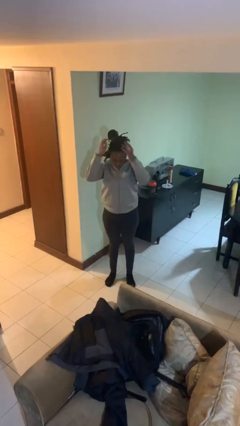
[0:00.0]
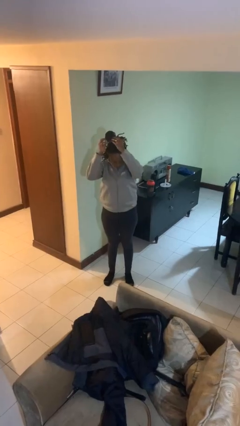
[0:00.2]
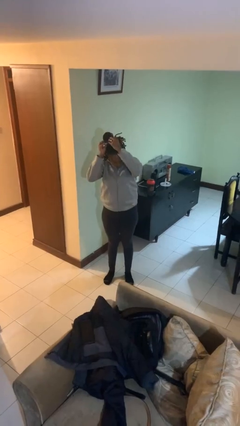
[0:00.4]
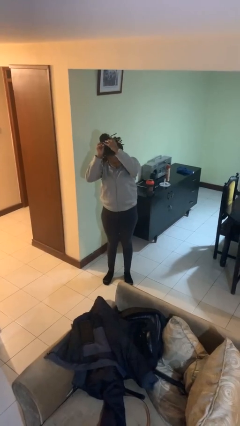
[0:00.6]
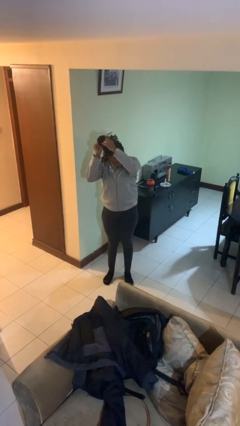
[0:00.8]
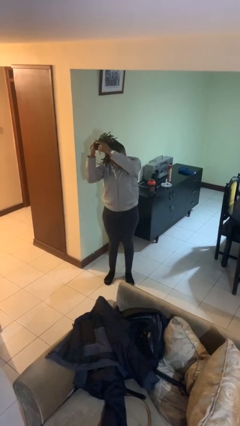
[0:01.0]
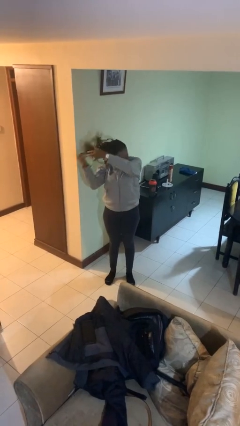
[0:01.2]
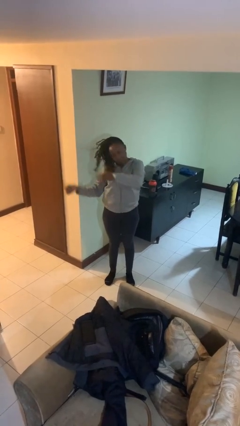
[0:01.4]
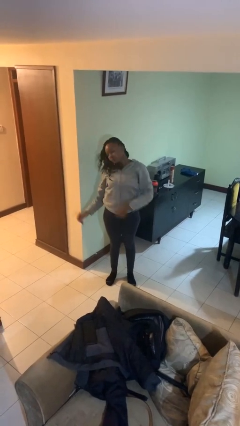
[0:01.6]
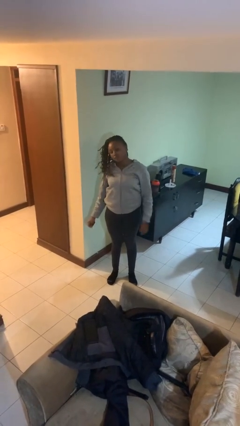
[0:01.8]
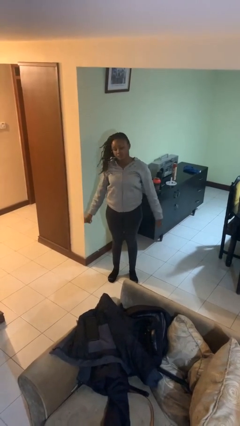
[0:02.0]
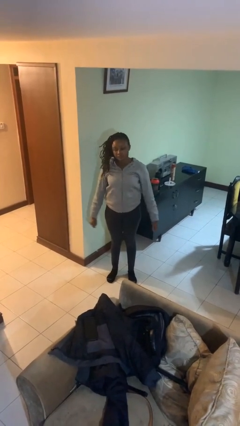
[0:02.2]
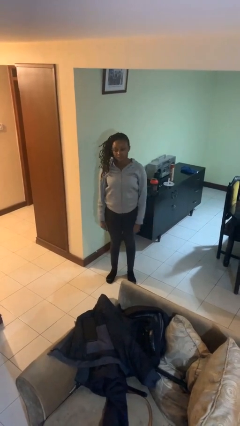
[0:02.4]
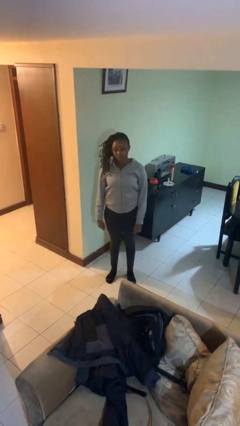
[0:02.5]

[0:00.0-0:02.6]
person takes off hairtie

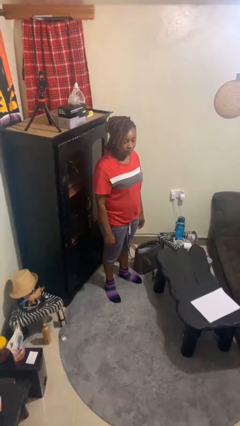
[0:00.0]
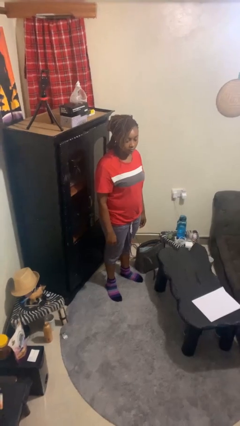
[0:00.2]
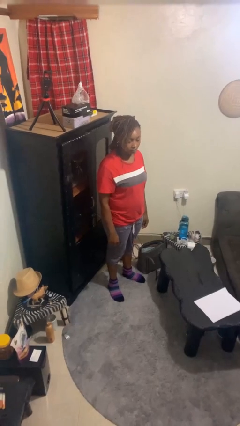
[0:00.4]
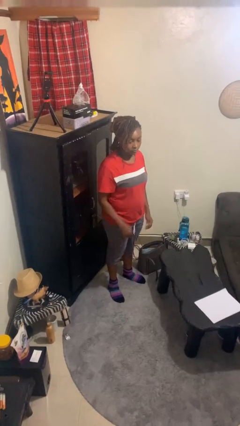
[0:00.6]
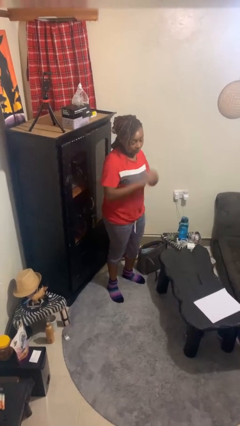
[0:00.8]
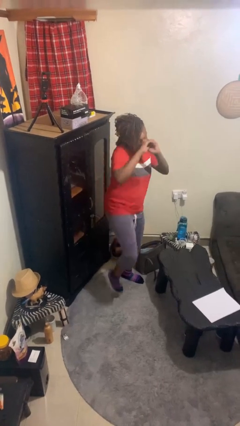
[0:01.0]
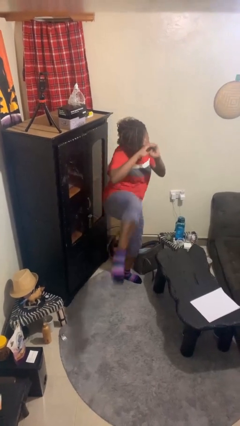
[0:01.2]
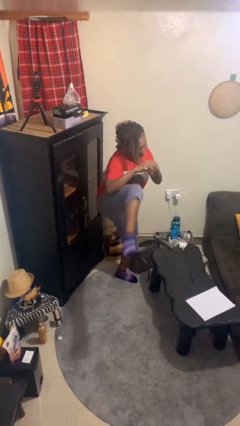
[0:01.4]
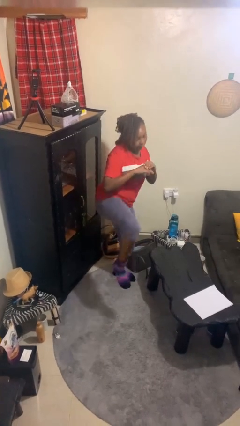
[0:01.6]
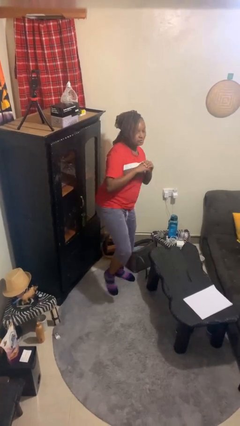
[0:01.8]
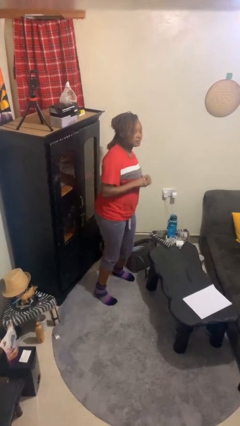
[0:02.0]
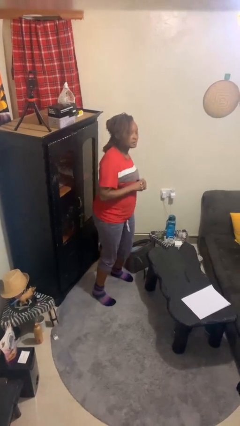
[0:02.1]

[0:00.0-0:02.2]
person karate kicks

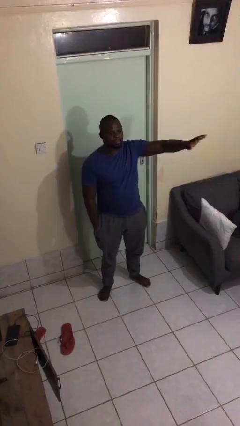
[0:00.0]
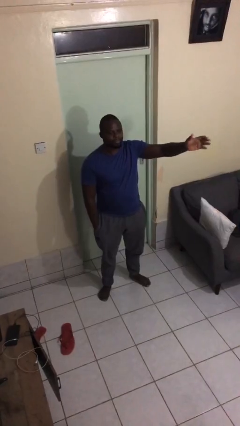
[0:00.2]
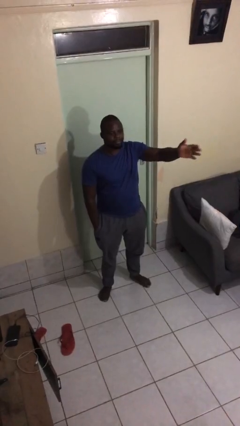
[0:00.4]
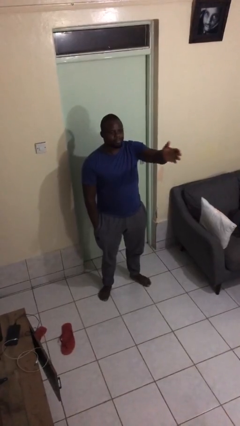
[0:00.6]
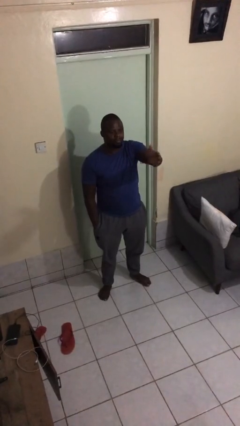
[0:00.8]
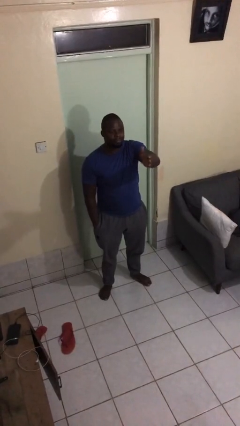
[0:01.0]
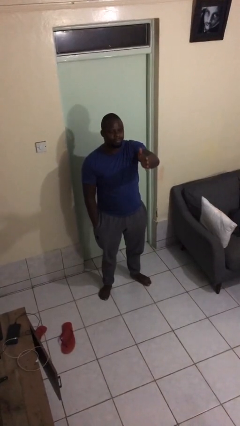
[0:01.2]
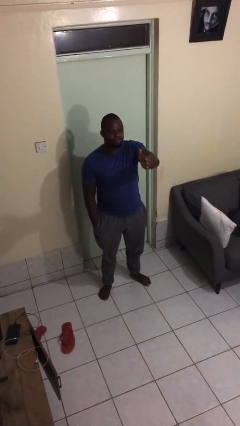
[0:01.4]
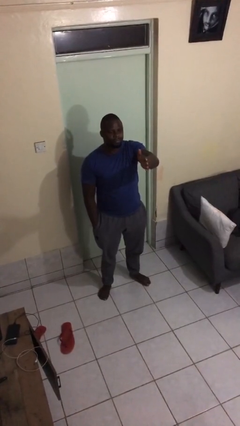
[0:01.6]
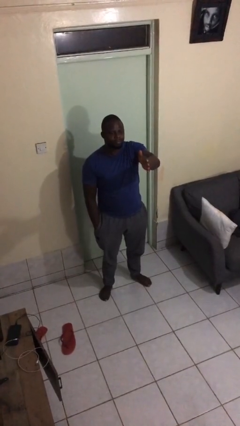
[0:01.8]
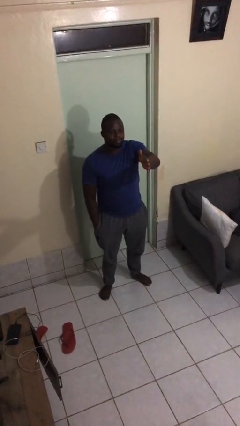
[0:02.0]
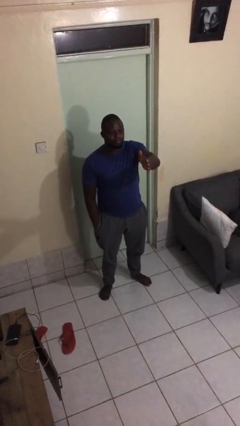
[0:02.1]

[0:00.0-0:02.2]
person gestures swipe right

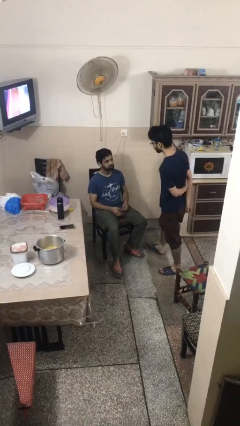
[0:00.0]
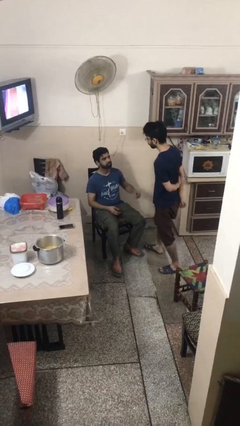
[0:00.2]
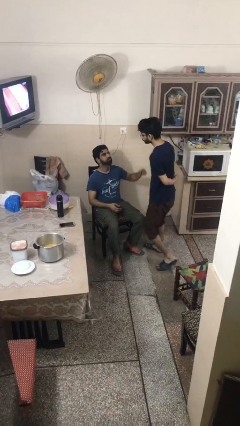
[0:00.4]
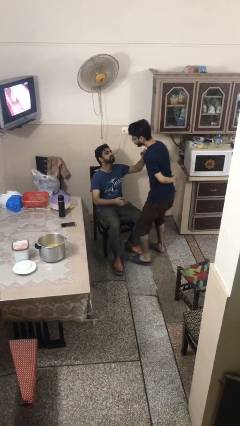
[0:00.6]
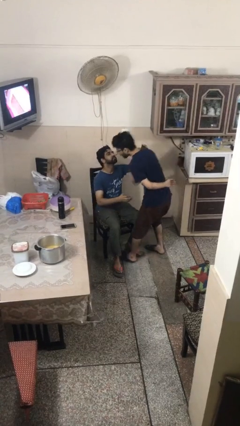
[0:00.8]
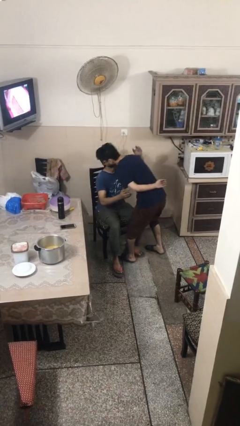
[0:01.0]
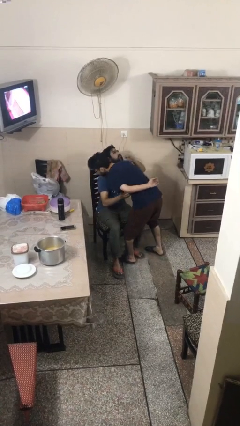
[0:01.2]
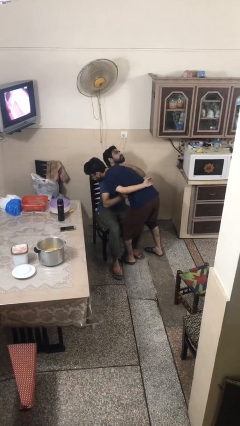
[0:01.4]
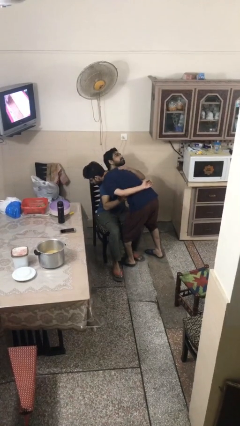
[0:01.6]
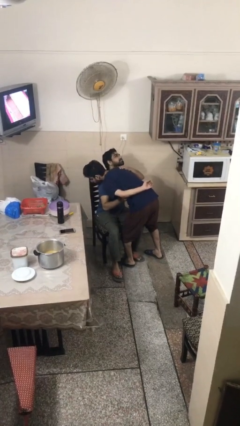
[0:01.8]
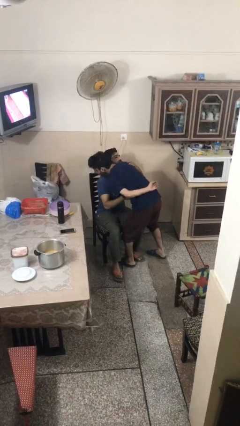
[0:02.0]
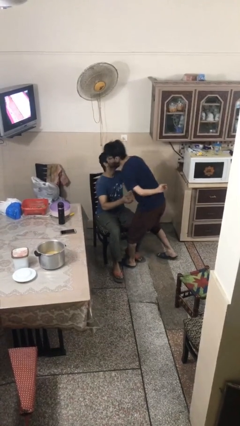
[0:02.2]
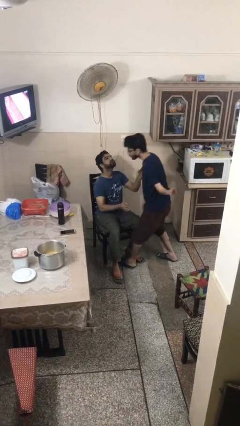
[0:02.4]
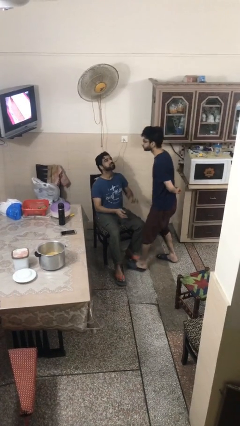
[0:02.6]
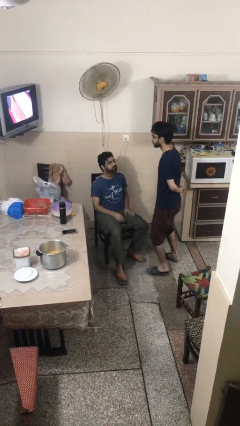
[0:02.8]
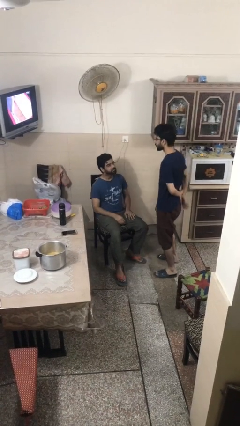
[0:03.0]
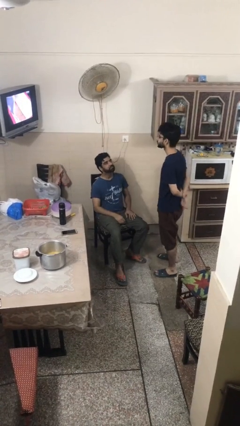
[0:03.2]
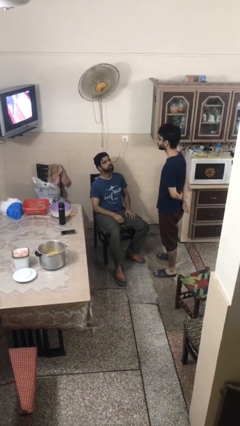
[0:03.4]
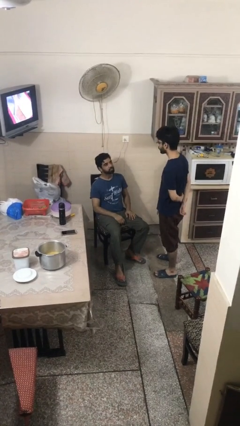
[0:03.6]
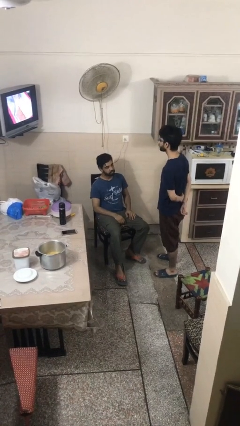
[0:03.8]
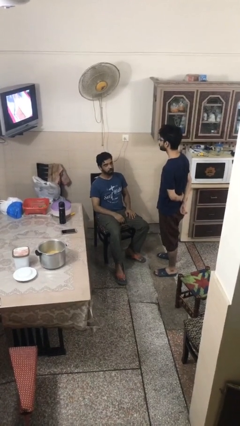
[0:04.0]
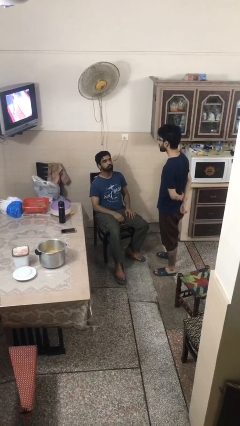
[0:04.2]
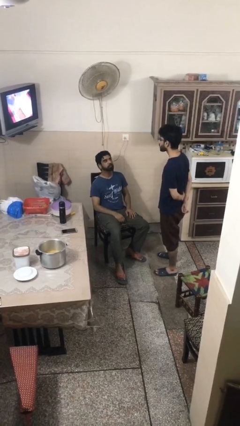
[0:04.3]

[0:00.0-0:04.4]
person embraces person

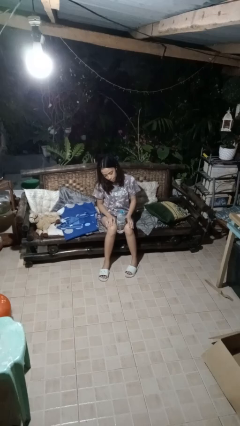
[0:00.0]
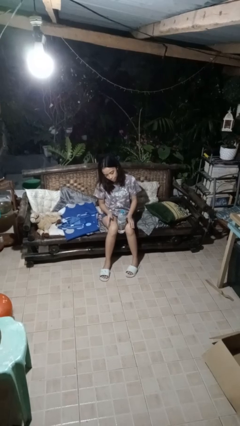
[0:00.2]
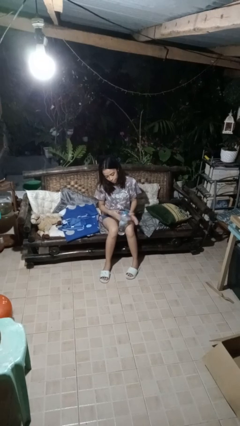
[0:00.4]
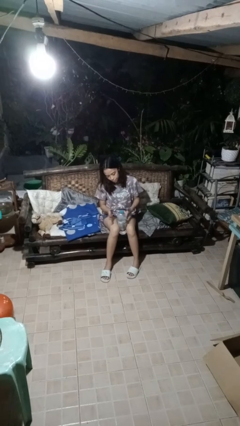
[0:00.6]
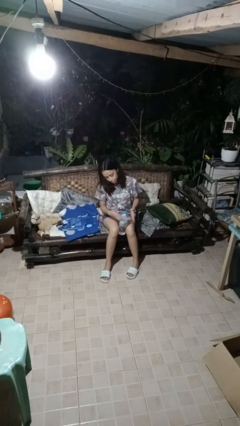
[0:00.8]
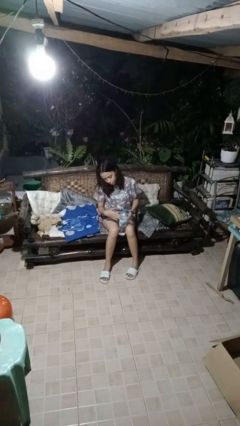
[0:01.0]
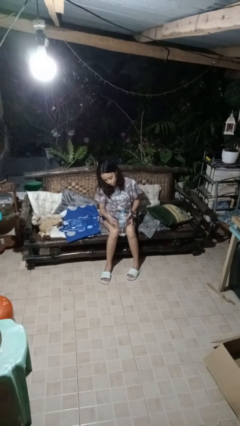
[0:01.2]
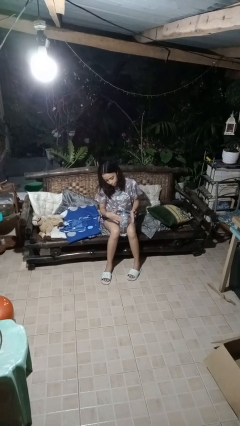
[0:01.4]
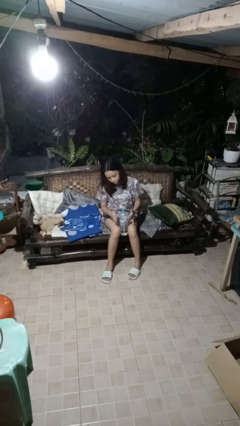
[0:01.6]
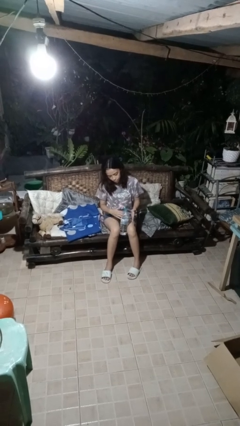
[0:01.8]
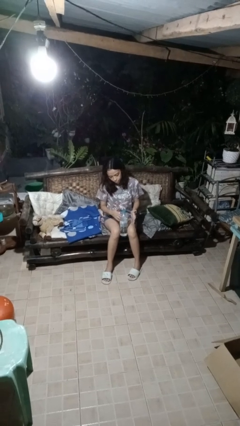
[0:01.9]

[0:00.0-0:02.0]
person taps object with finger

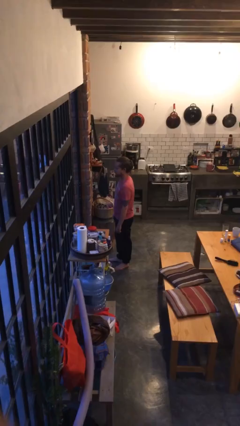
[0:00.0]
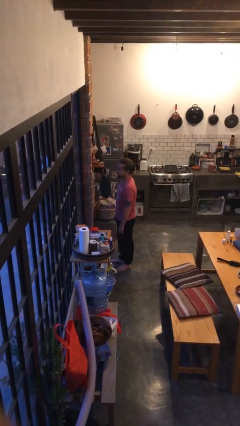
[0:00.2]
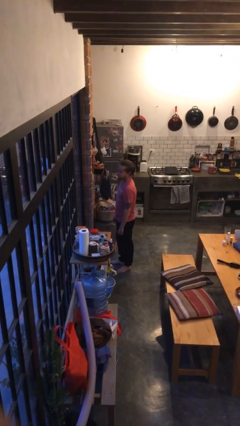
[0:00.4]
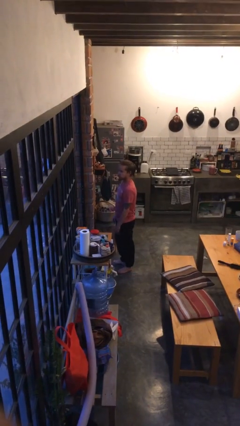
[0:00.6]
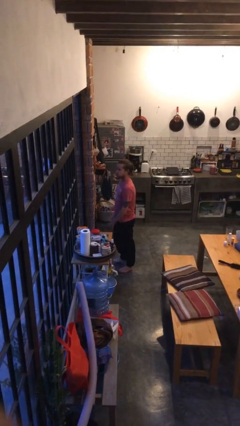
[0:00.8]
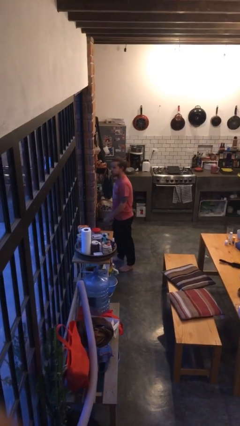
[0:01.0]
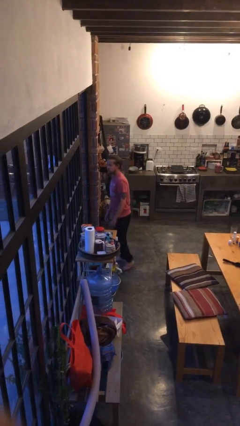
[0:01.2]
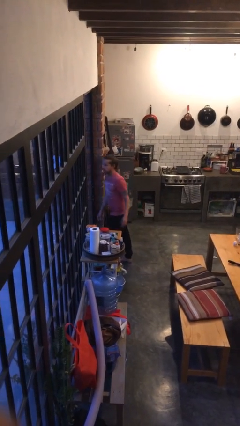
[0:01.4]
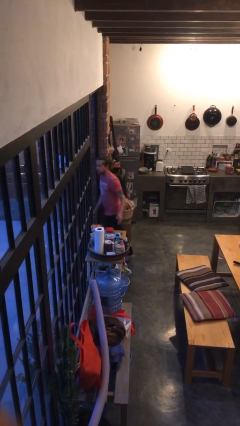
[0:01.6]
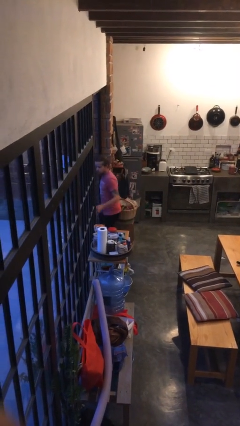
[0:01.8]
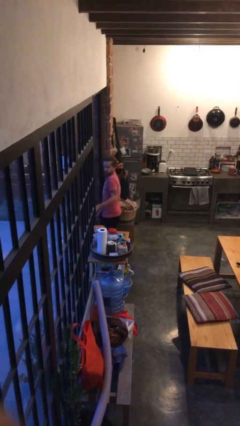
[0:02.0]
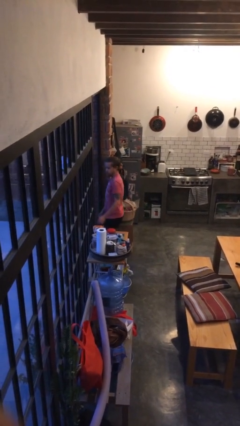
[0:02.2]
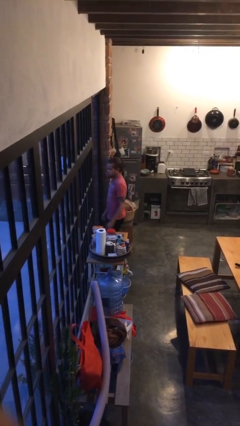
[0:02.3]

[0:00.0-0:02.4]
person bumps into wall

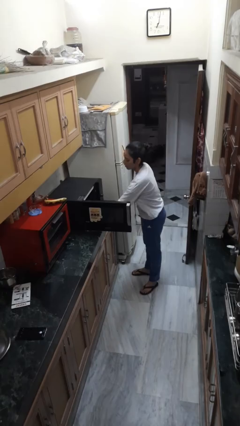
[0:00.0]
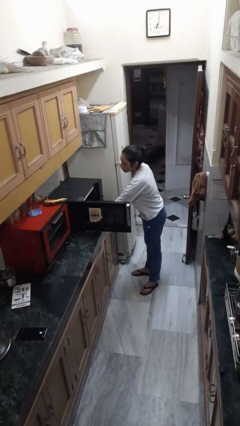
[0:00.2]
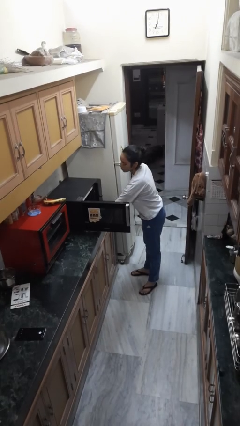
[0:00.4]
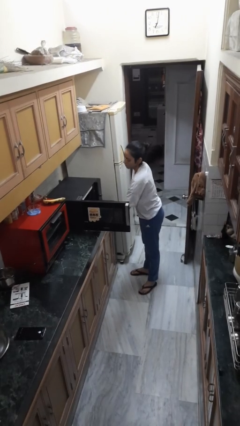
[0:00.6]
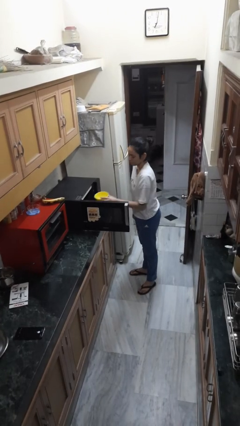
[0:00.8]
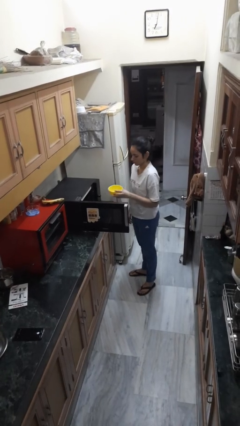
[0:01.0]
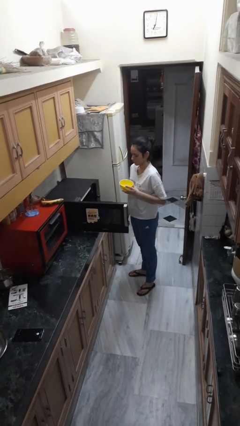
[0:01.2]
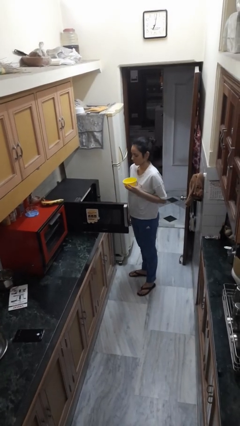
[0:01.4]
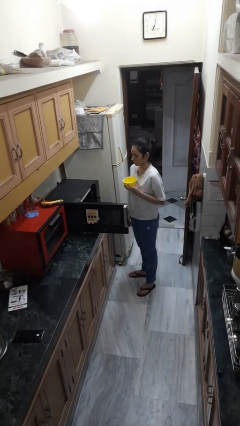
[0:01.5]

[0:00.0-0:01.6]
person takes object from microwave
